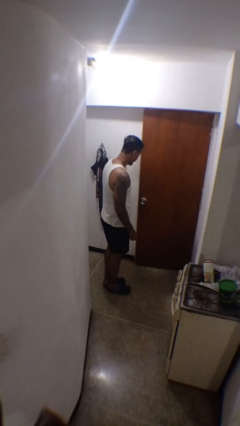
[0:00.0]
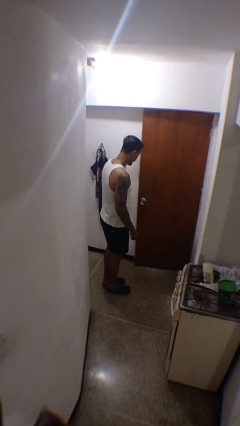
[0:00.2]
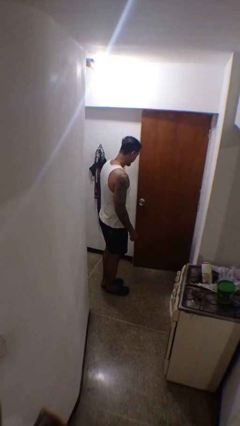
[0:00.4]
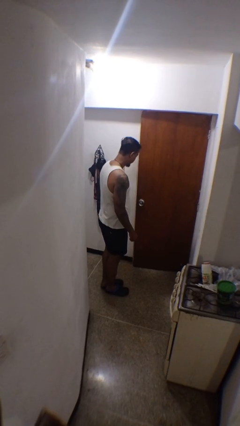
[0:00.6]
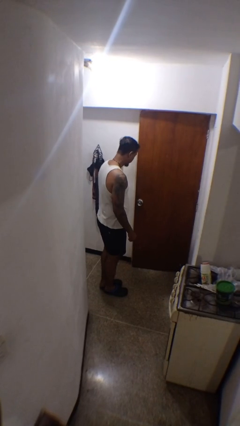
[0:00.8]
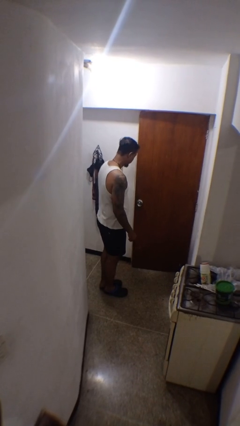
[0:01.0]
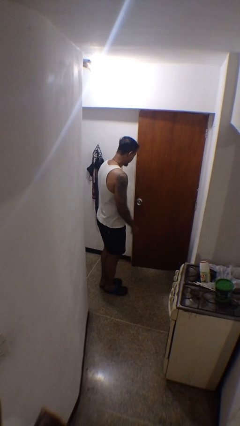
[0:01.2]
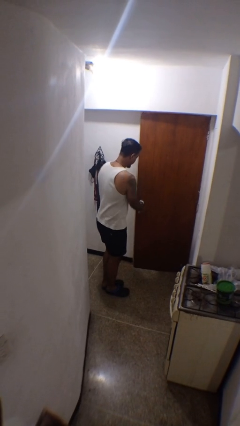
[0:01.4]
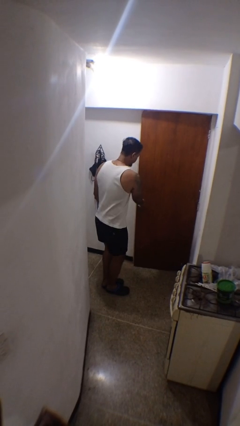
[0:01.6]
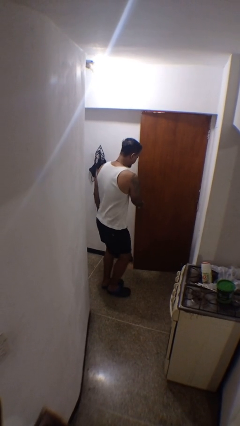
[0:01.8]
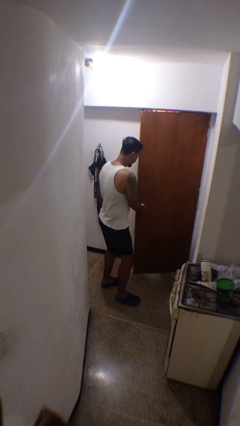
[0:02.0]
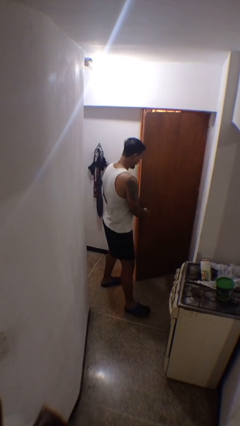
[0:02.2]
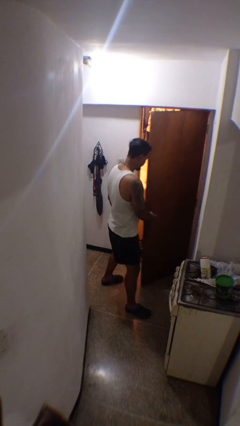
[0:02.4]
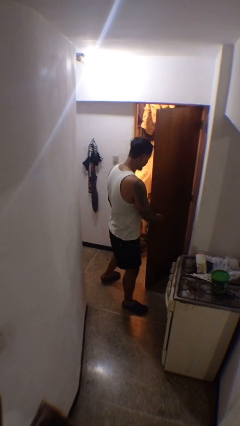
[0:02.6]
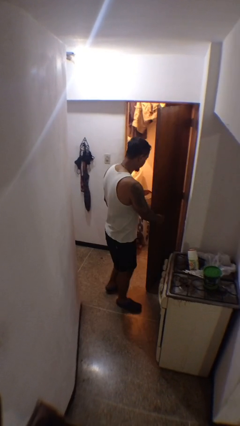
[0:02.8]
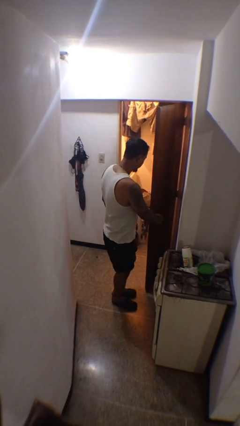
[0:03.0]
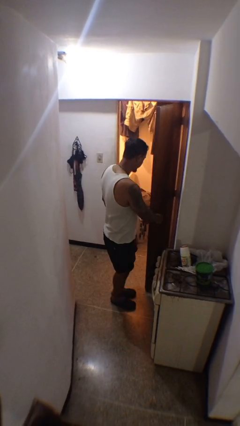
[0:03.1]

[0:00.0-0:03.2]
person opens facility door

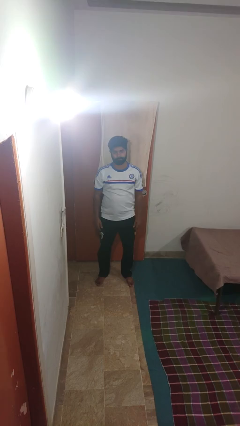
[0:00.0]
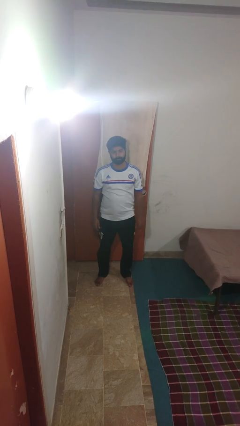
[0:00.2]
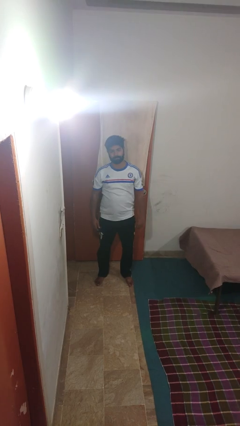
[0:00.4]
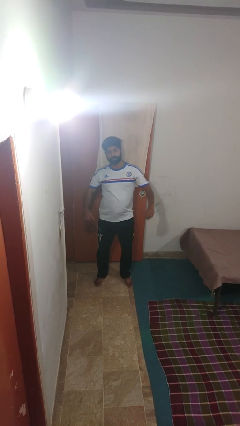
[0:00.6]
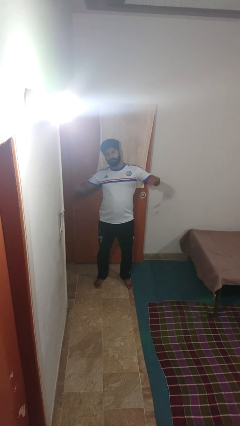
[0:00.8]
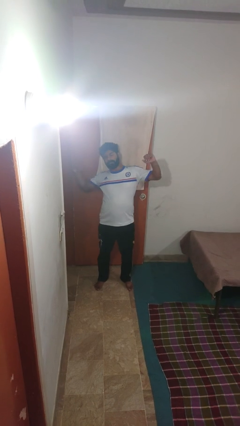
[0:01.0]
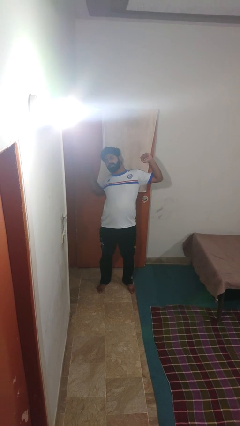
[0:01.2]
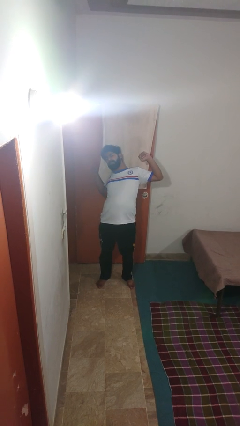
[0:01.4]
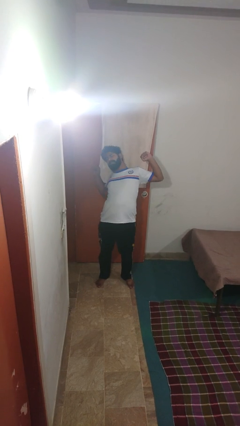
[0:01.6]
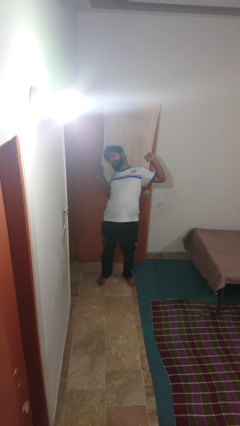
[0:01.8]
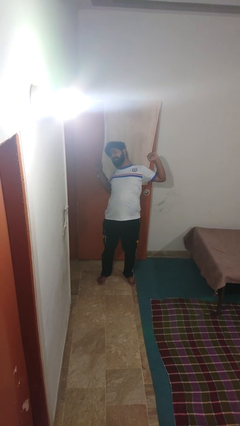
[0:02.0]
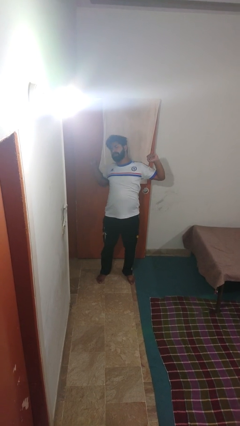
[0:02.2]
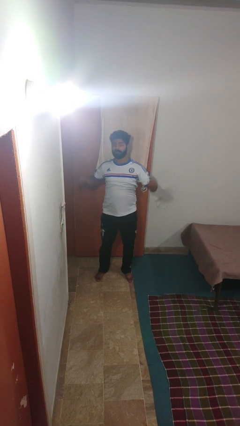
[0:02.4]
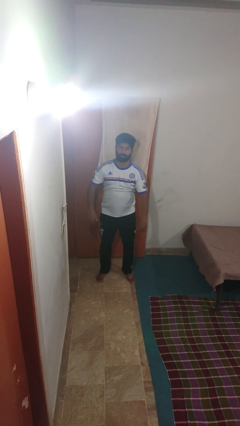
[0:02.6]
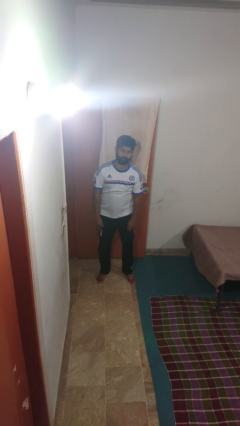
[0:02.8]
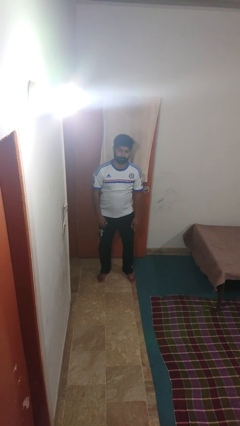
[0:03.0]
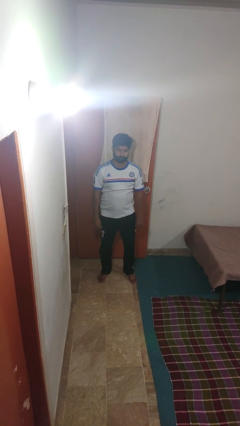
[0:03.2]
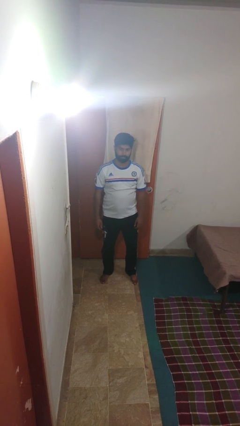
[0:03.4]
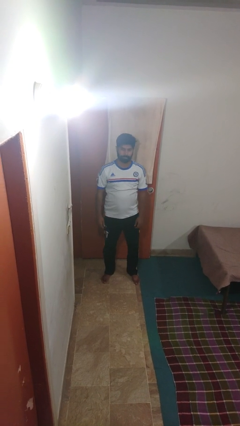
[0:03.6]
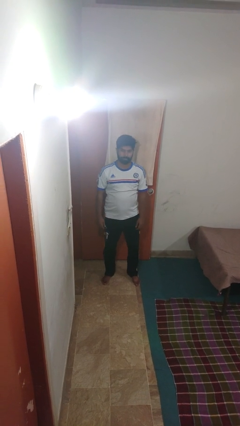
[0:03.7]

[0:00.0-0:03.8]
person stretches arms to side

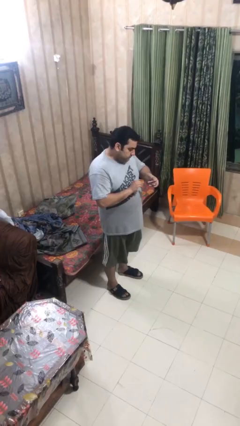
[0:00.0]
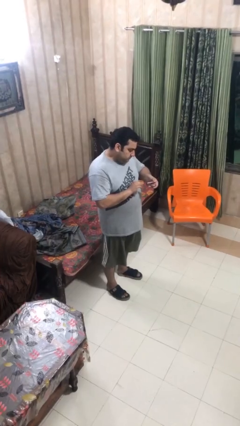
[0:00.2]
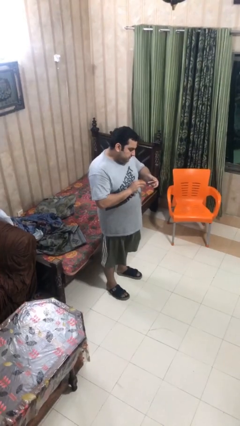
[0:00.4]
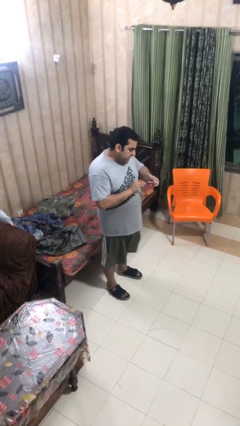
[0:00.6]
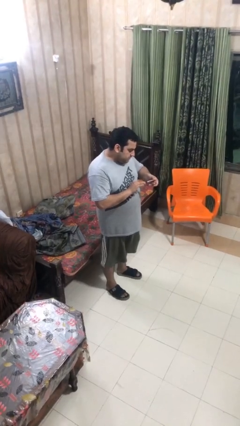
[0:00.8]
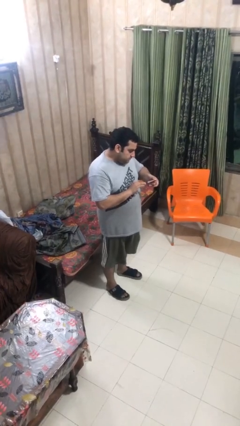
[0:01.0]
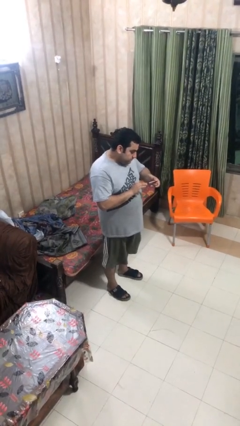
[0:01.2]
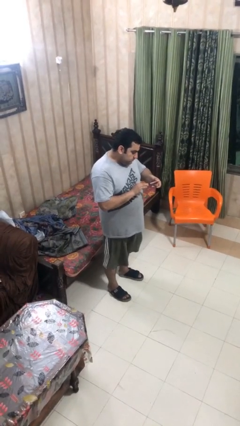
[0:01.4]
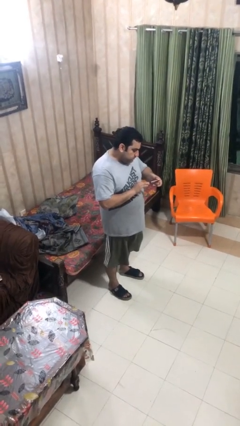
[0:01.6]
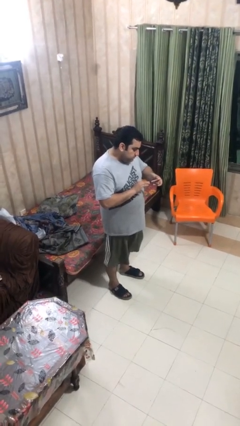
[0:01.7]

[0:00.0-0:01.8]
person clips fingernails

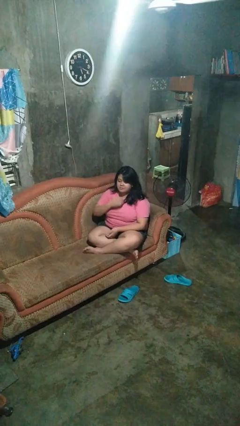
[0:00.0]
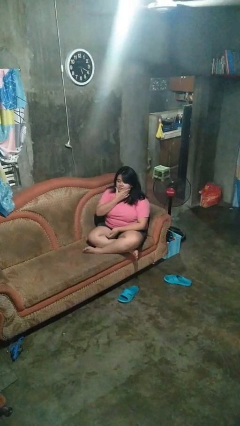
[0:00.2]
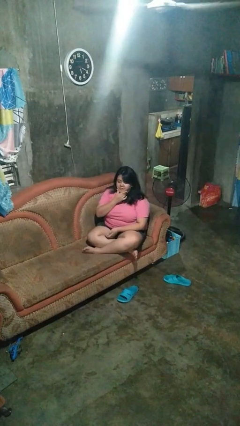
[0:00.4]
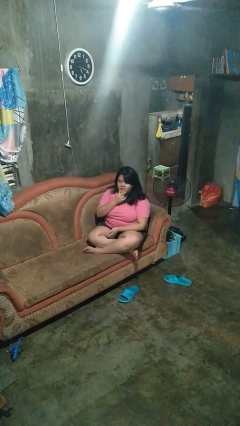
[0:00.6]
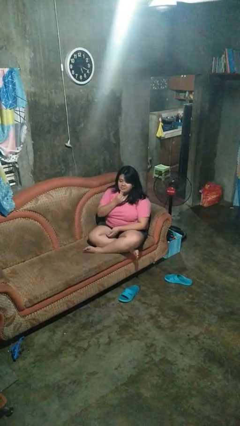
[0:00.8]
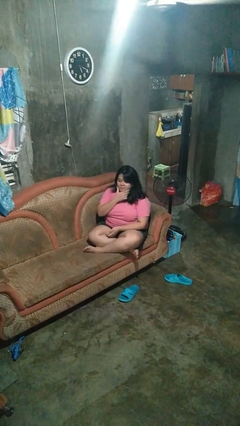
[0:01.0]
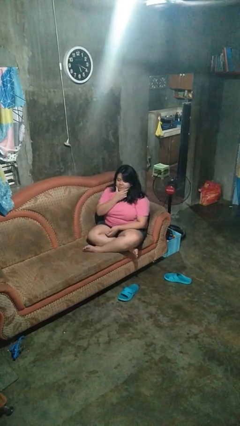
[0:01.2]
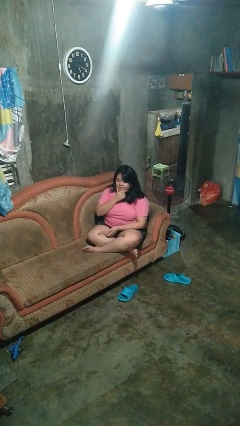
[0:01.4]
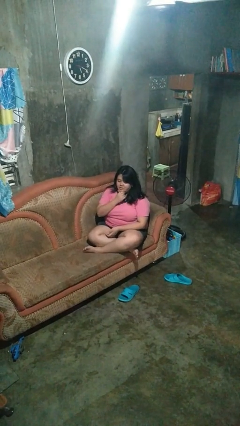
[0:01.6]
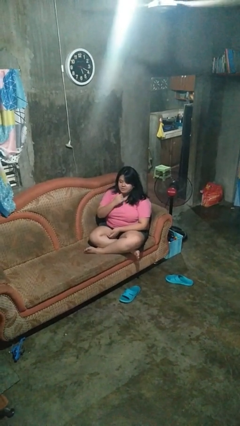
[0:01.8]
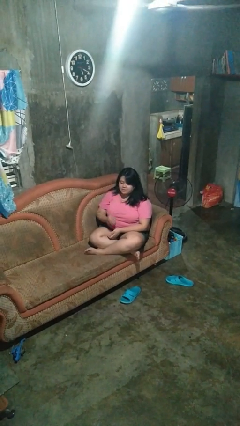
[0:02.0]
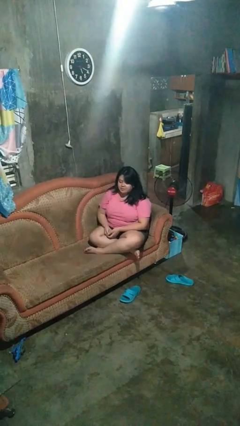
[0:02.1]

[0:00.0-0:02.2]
person strokes chin

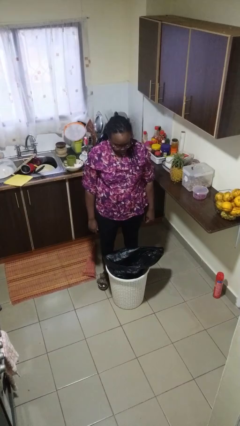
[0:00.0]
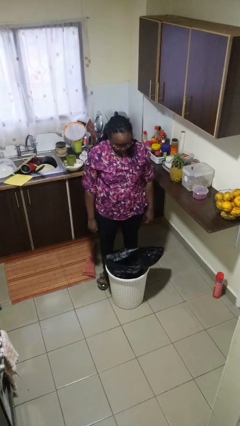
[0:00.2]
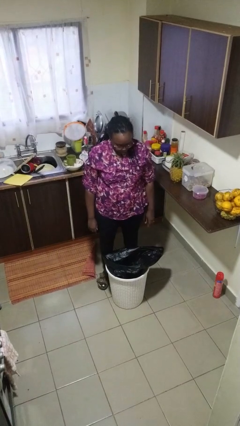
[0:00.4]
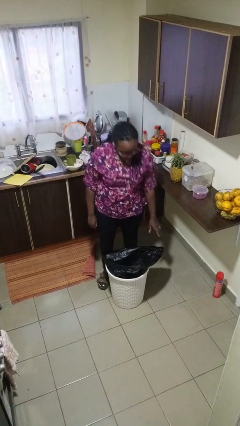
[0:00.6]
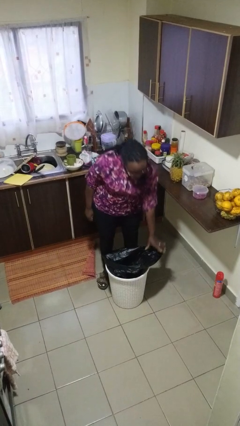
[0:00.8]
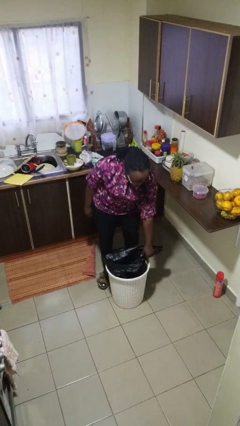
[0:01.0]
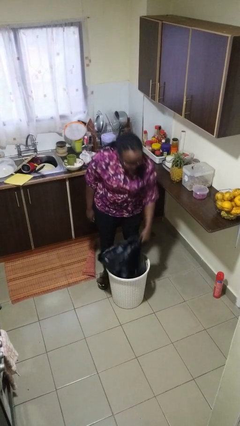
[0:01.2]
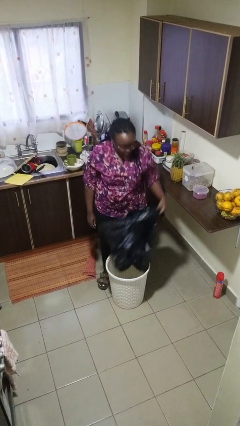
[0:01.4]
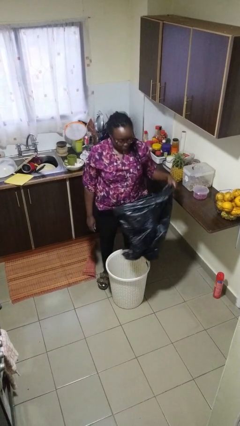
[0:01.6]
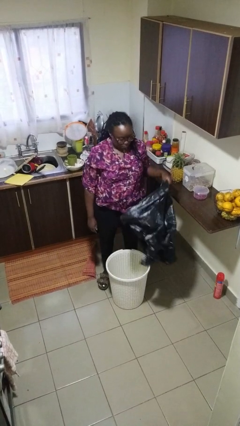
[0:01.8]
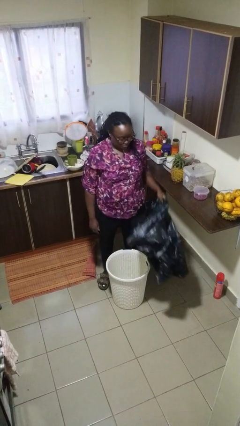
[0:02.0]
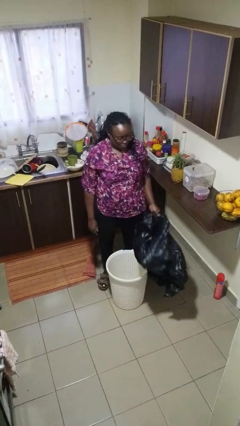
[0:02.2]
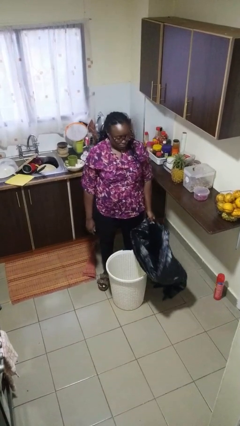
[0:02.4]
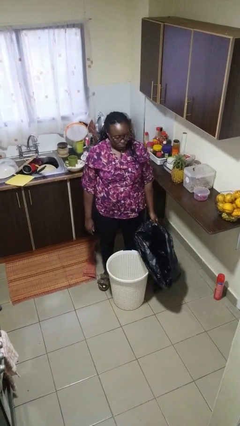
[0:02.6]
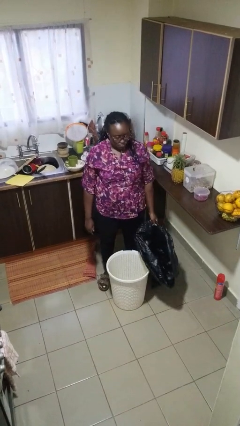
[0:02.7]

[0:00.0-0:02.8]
person inserts trashbag into trashcan

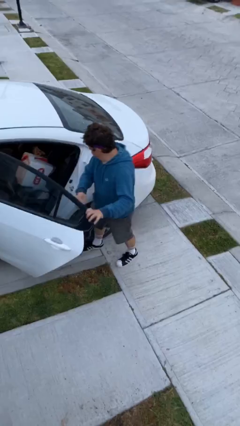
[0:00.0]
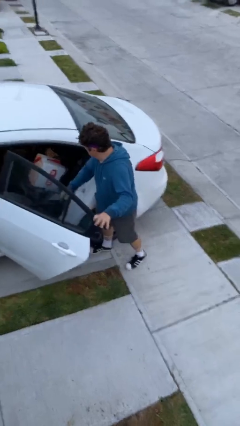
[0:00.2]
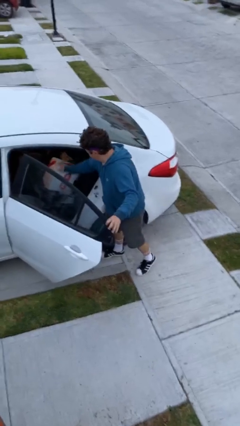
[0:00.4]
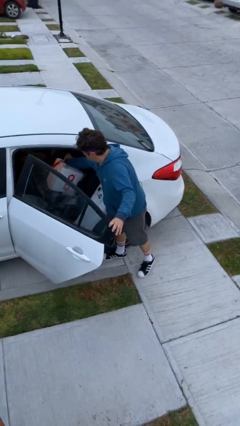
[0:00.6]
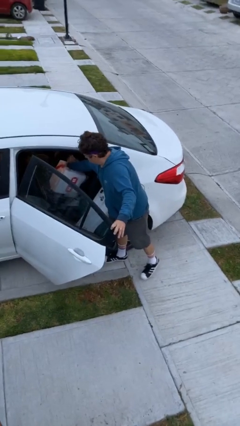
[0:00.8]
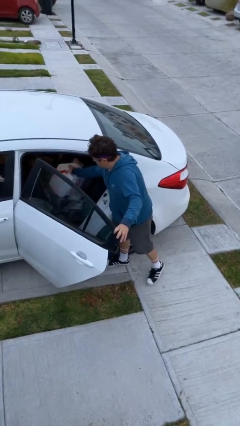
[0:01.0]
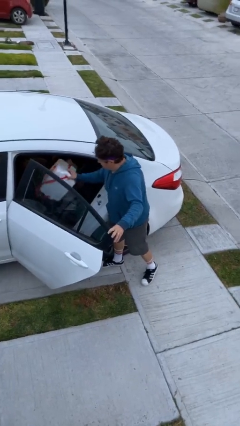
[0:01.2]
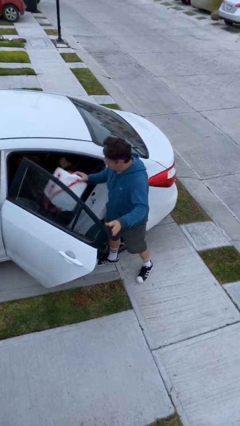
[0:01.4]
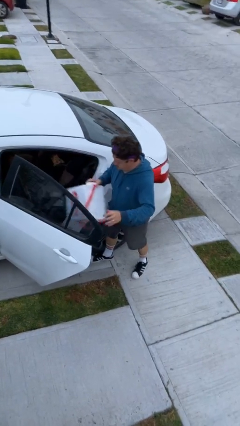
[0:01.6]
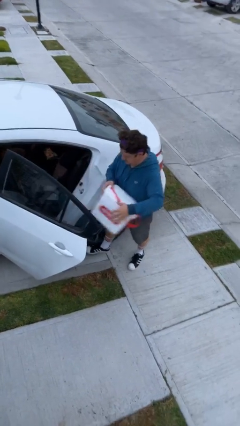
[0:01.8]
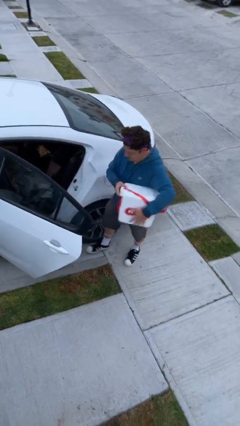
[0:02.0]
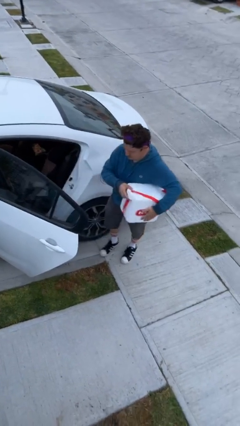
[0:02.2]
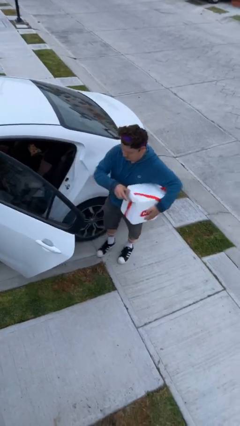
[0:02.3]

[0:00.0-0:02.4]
person unloads car

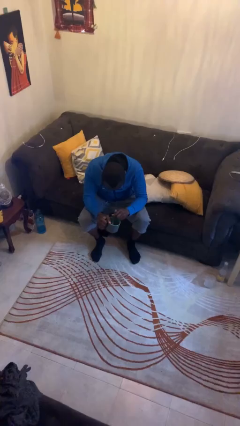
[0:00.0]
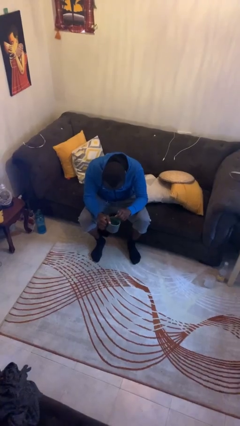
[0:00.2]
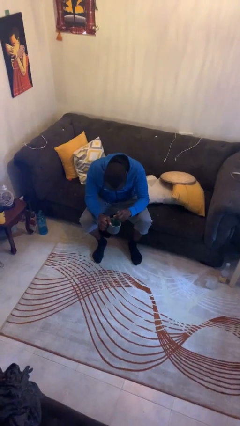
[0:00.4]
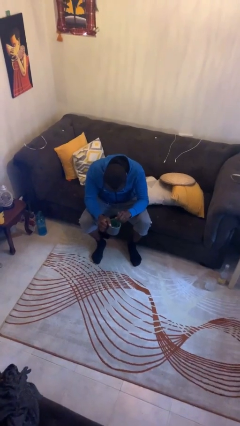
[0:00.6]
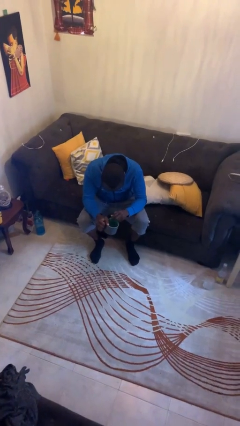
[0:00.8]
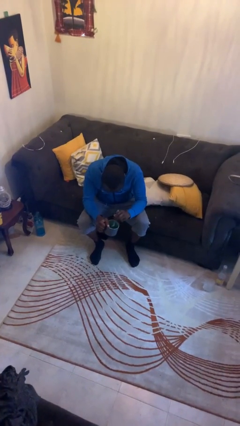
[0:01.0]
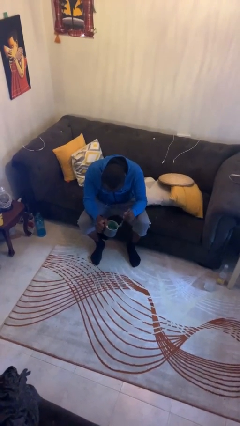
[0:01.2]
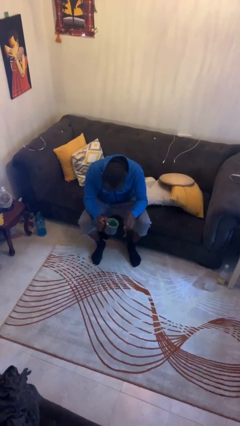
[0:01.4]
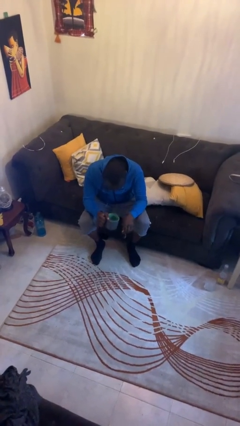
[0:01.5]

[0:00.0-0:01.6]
person stirs mug
